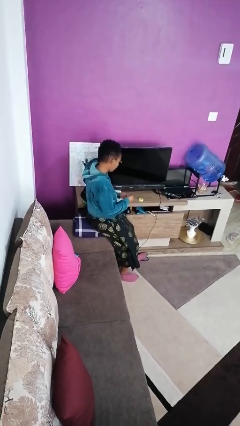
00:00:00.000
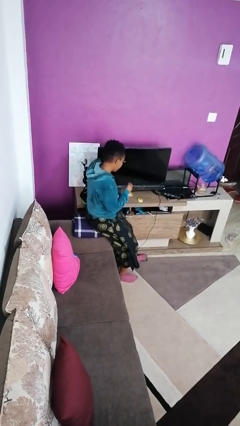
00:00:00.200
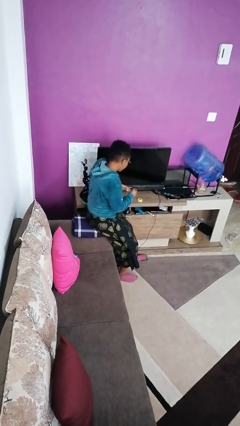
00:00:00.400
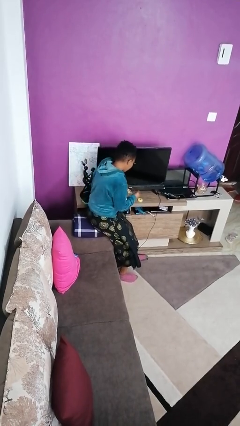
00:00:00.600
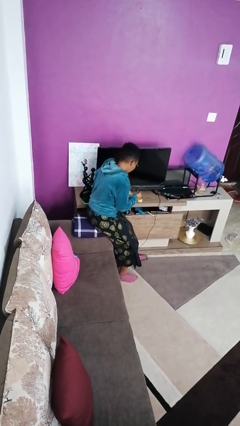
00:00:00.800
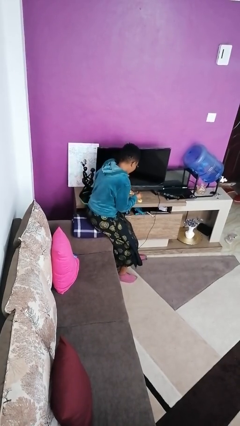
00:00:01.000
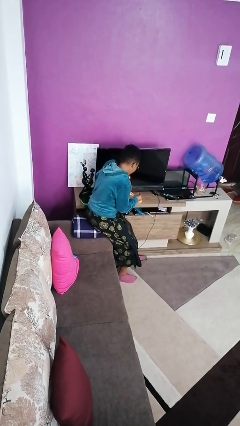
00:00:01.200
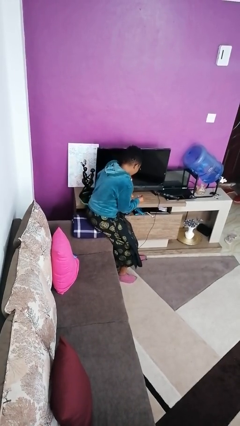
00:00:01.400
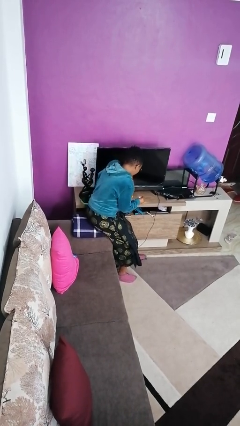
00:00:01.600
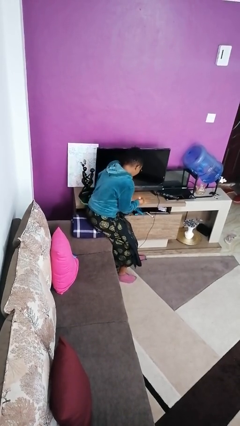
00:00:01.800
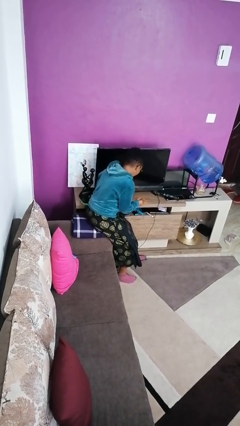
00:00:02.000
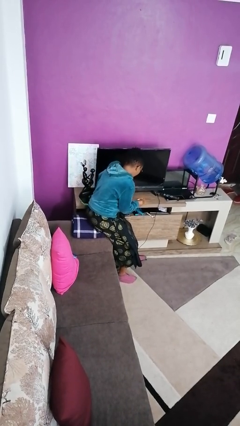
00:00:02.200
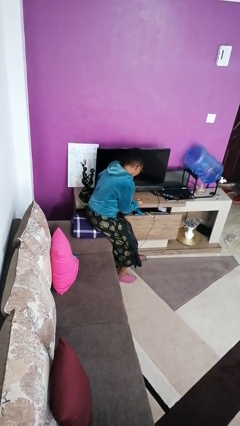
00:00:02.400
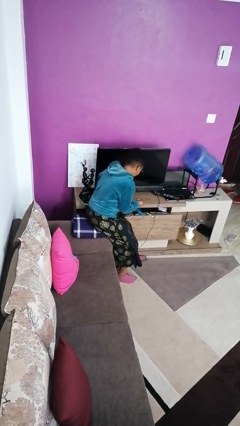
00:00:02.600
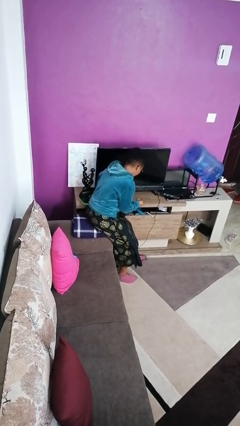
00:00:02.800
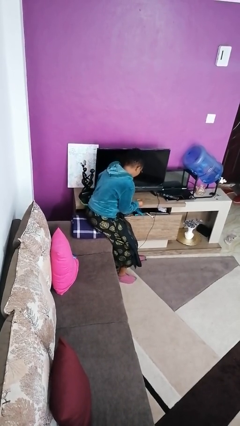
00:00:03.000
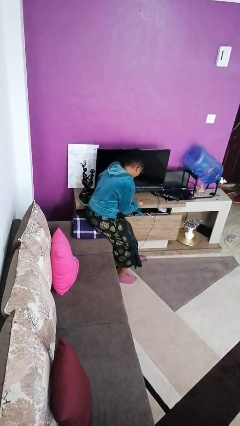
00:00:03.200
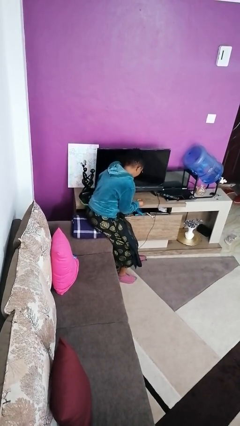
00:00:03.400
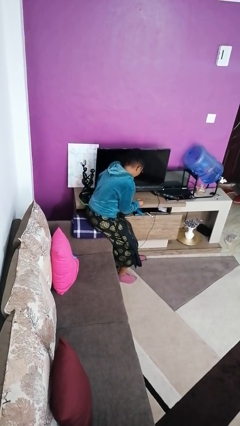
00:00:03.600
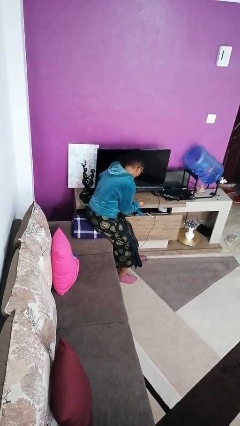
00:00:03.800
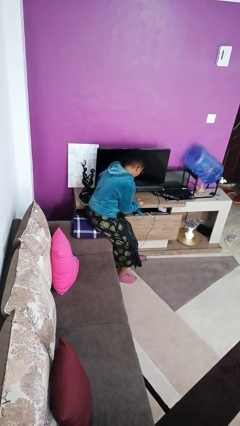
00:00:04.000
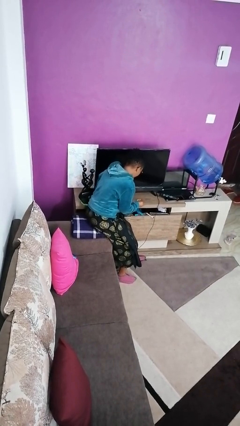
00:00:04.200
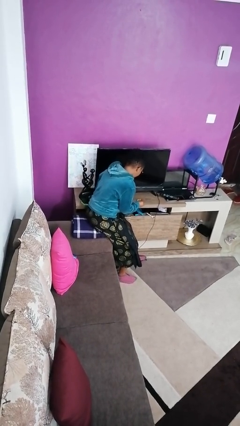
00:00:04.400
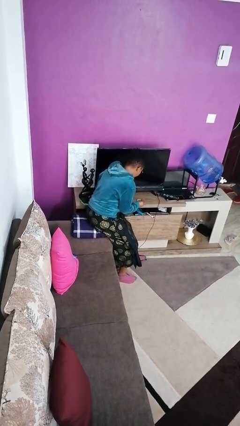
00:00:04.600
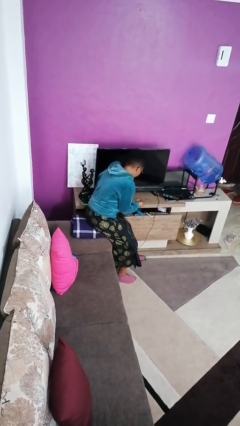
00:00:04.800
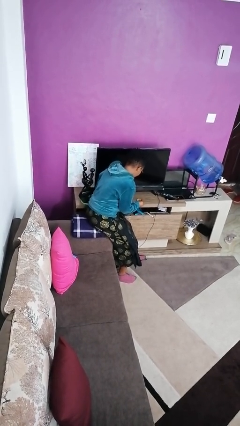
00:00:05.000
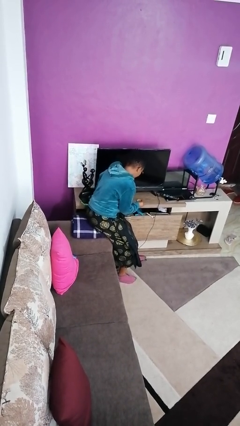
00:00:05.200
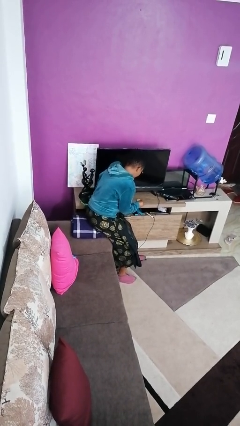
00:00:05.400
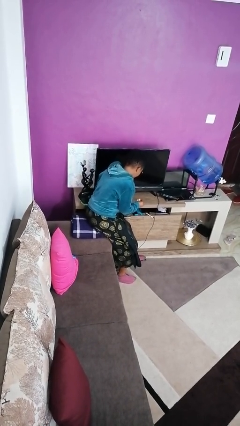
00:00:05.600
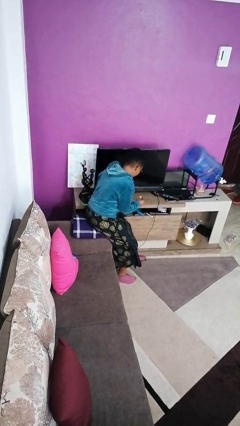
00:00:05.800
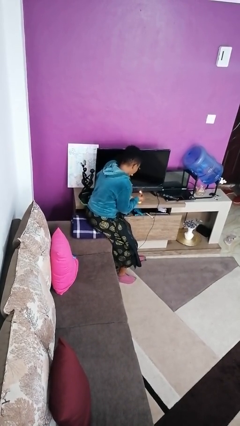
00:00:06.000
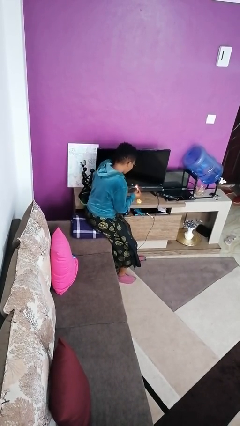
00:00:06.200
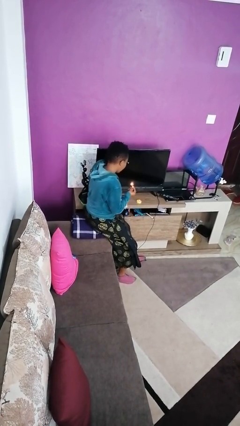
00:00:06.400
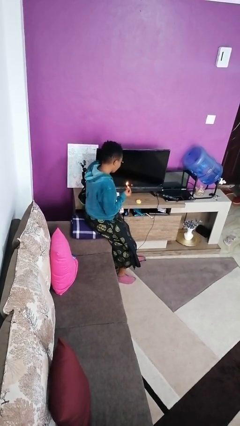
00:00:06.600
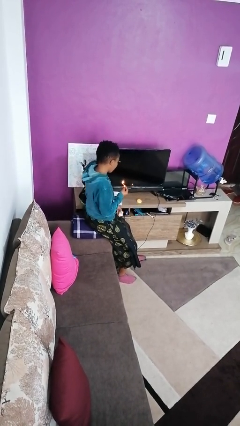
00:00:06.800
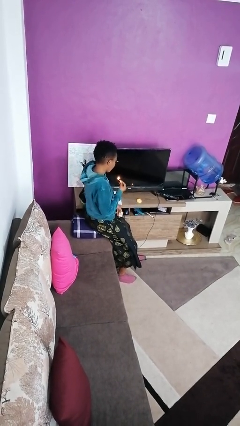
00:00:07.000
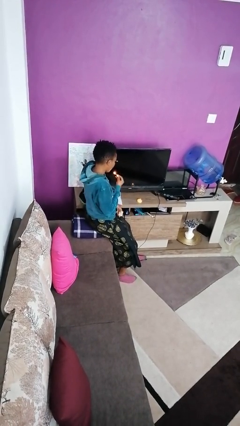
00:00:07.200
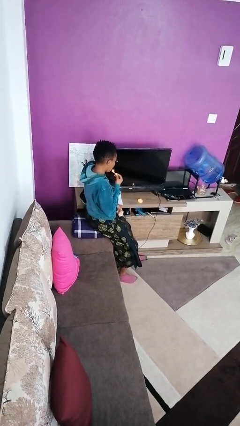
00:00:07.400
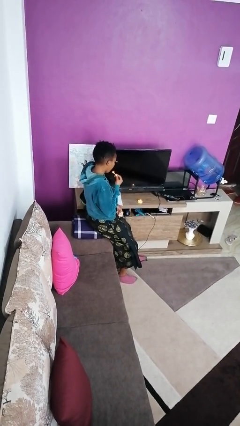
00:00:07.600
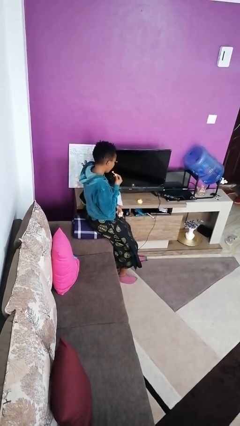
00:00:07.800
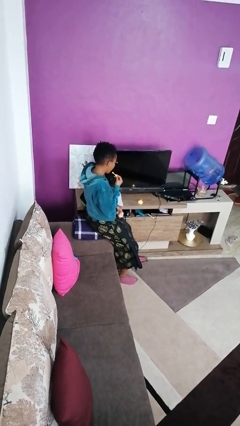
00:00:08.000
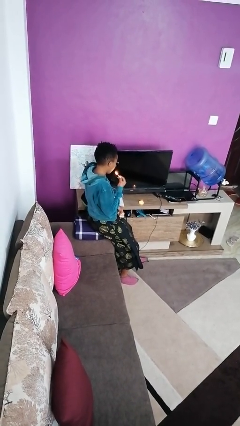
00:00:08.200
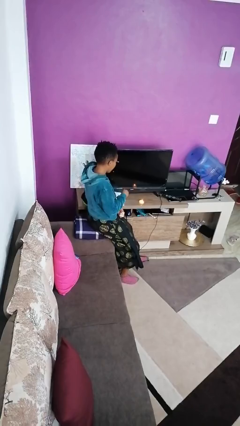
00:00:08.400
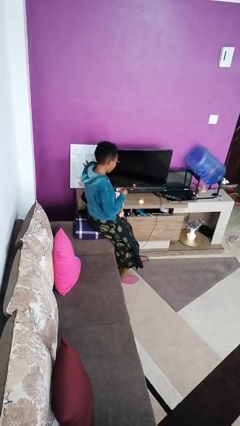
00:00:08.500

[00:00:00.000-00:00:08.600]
person lights candle

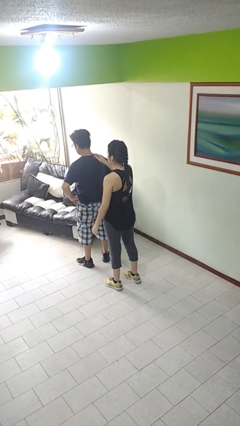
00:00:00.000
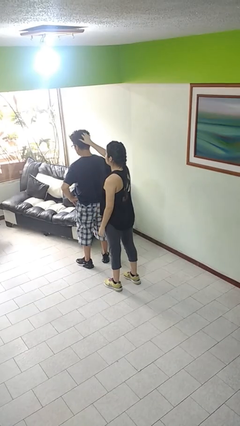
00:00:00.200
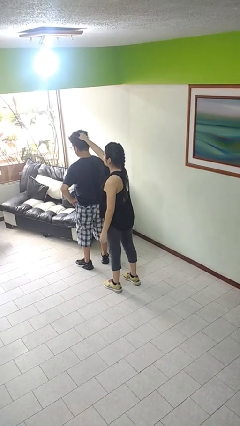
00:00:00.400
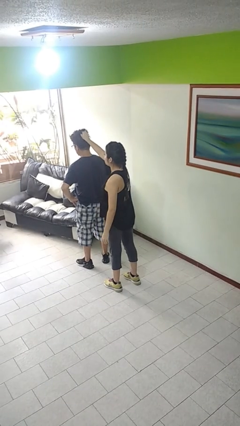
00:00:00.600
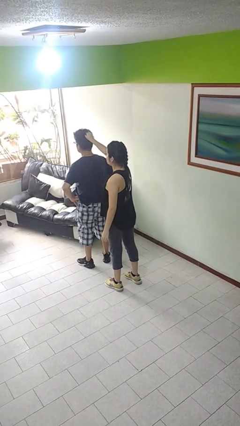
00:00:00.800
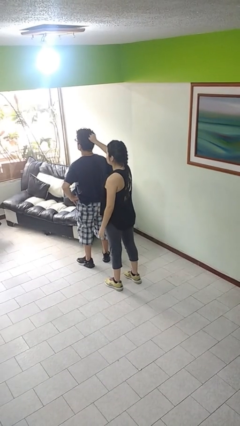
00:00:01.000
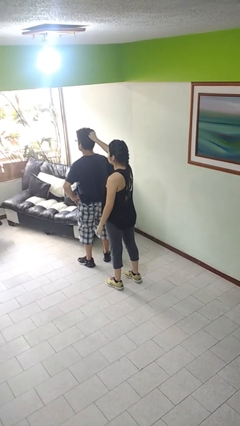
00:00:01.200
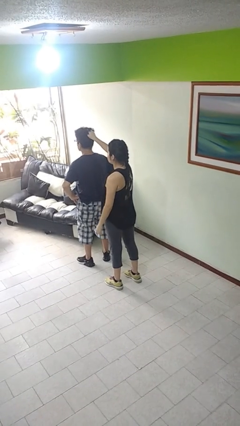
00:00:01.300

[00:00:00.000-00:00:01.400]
person grabs person by hair

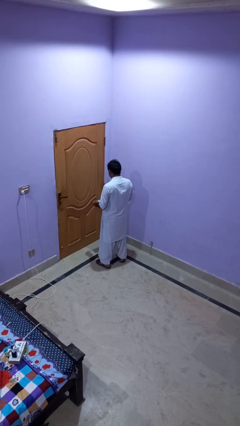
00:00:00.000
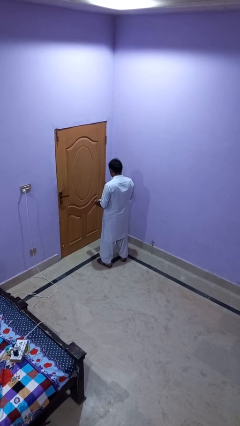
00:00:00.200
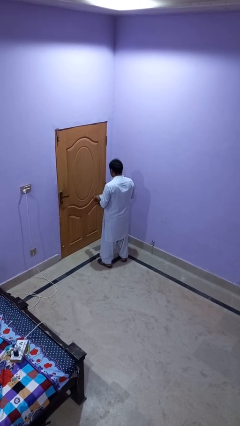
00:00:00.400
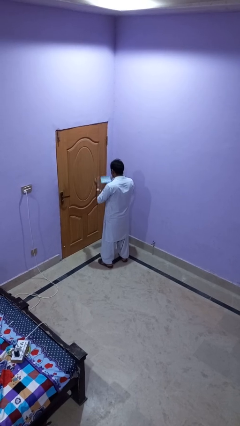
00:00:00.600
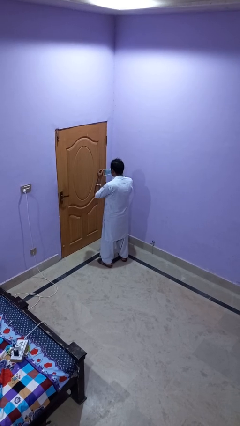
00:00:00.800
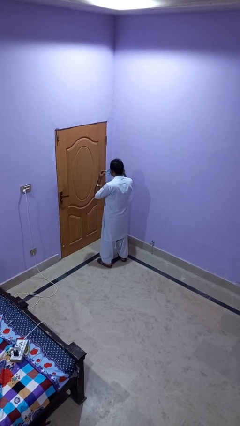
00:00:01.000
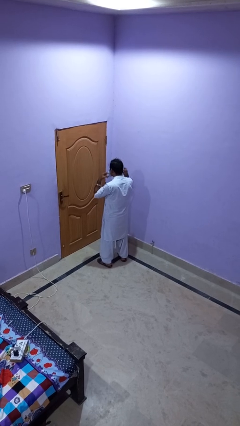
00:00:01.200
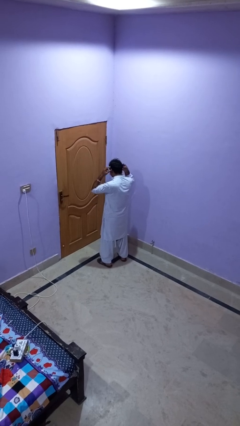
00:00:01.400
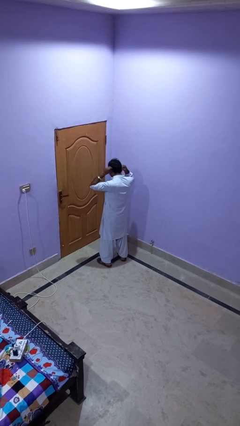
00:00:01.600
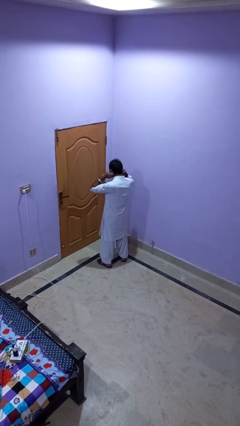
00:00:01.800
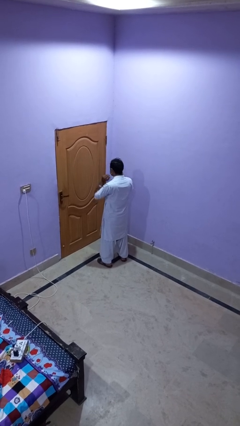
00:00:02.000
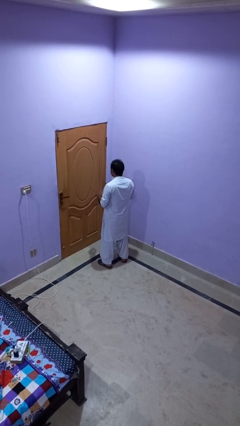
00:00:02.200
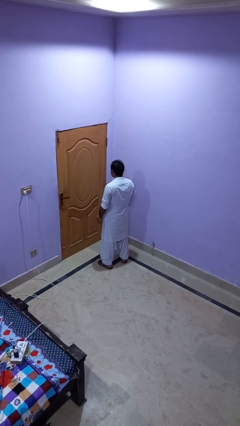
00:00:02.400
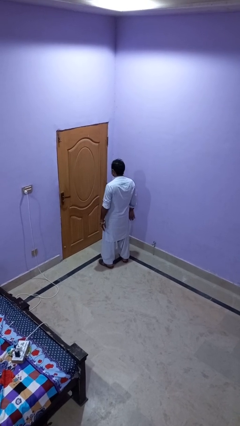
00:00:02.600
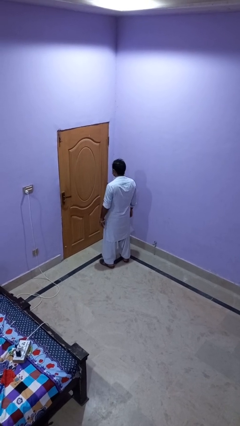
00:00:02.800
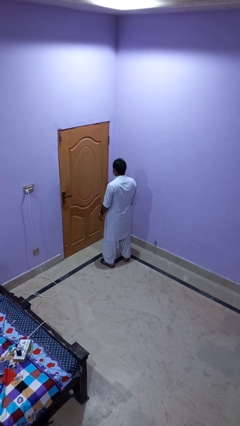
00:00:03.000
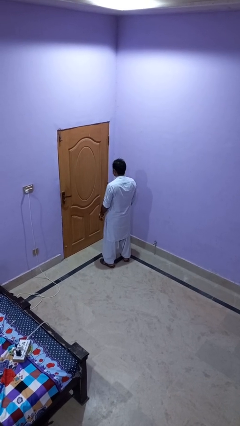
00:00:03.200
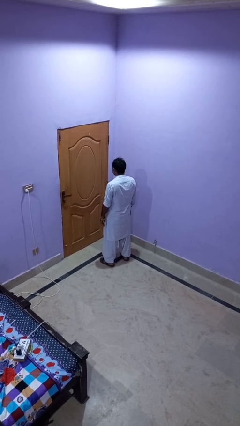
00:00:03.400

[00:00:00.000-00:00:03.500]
person puts on facemask

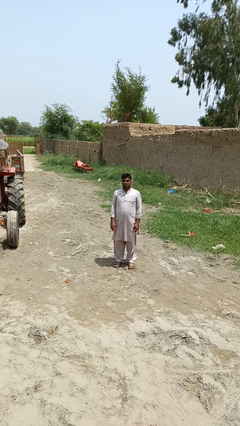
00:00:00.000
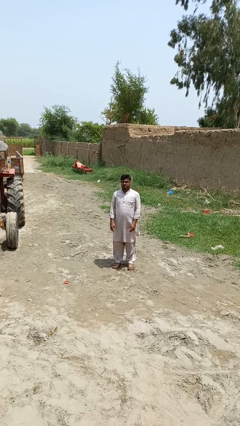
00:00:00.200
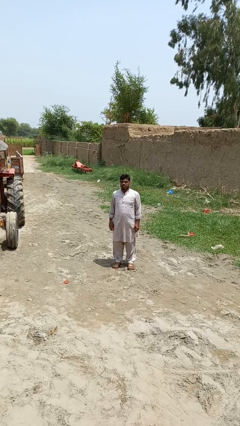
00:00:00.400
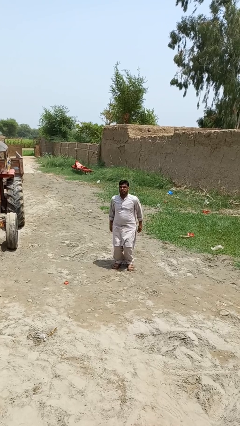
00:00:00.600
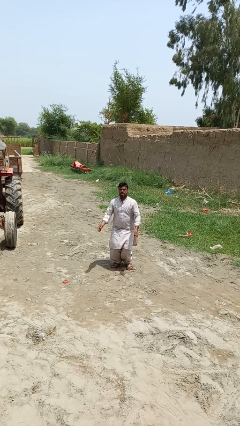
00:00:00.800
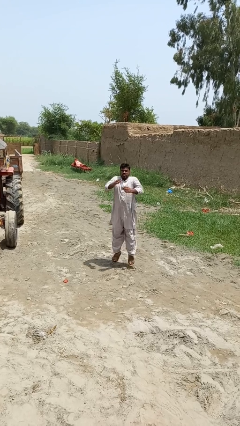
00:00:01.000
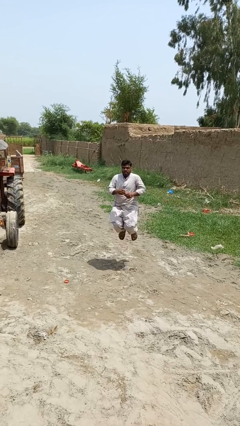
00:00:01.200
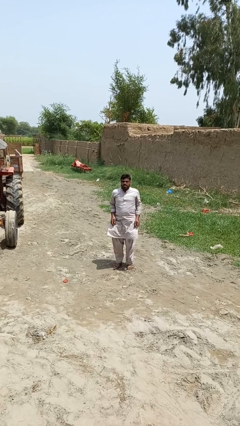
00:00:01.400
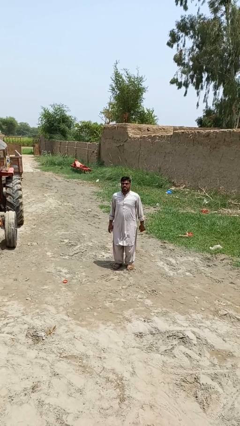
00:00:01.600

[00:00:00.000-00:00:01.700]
person jumps

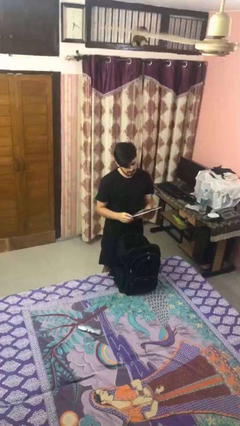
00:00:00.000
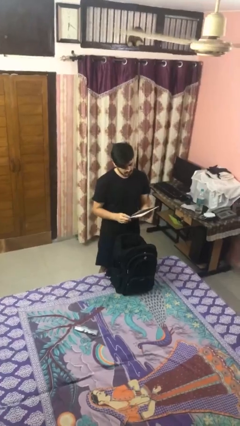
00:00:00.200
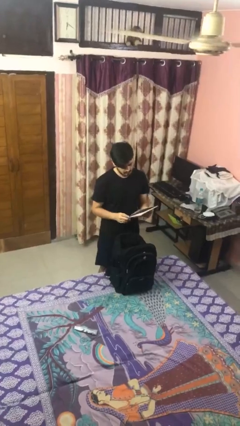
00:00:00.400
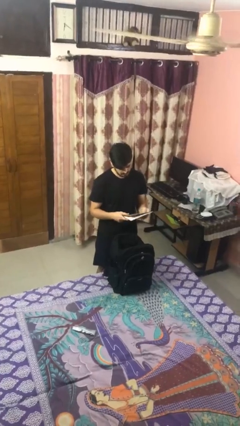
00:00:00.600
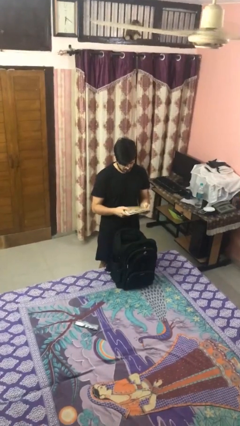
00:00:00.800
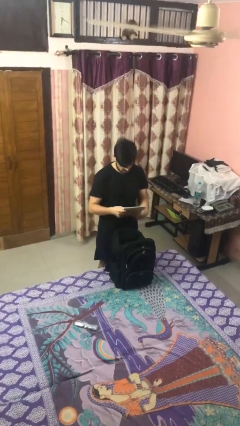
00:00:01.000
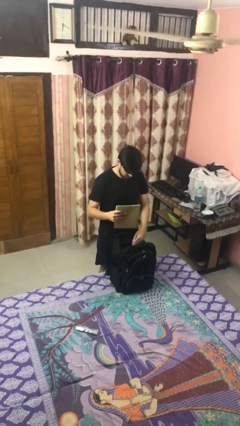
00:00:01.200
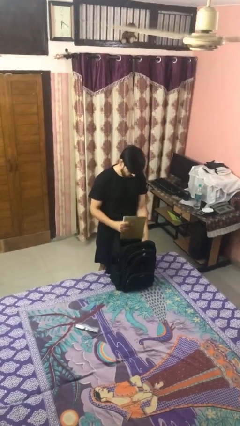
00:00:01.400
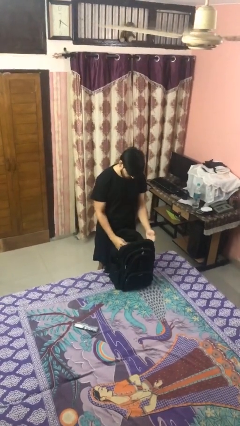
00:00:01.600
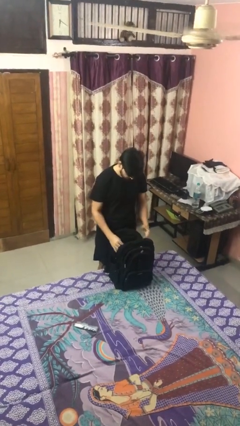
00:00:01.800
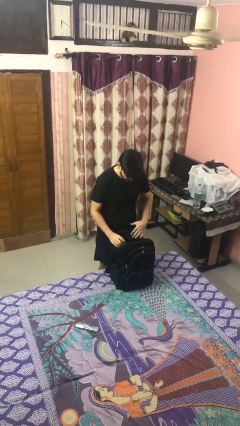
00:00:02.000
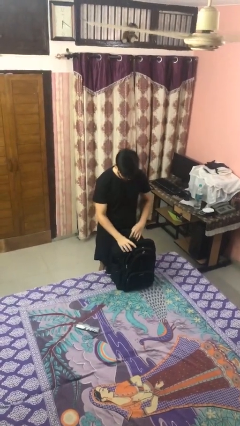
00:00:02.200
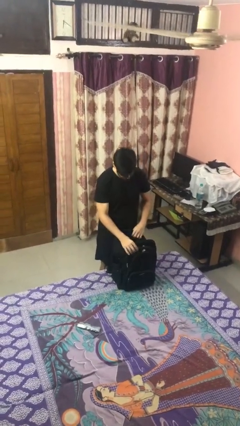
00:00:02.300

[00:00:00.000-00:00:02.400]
person puts object into backpack
